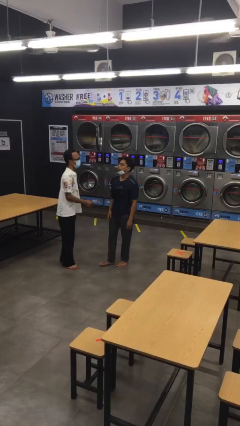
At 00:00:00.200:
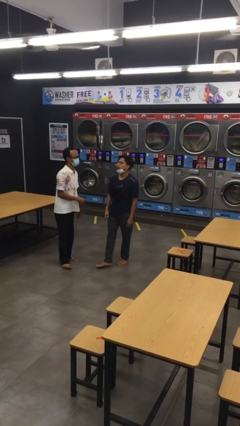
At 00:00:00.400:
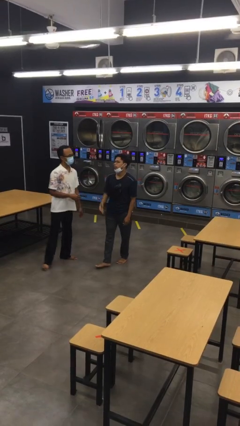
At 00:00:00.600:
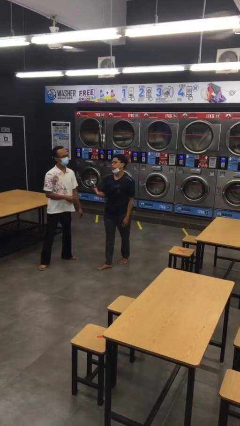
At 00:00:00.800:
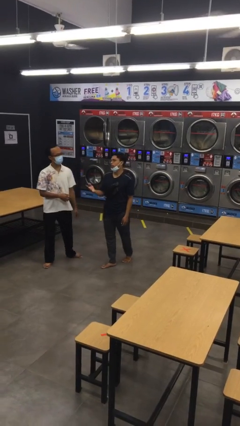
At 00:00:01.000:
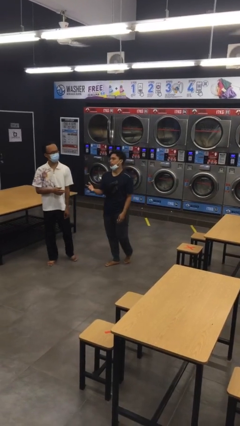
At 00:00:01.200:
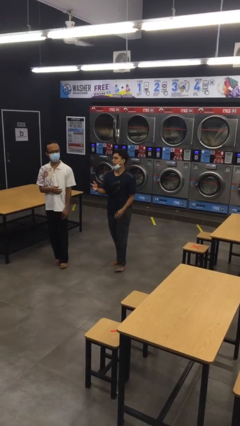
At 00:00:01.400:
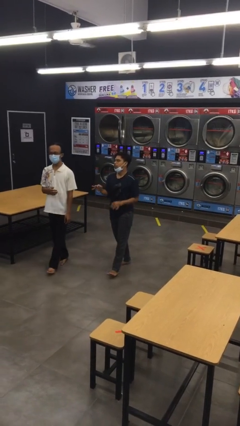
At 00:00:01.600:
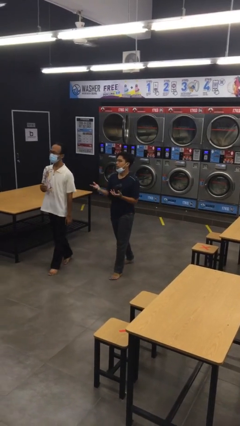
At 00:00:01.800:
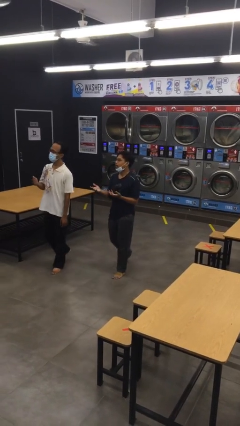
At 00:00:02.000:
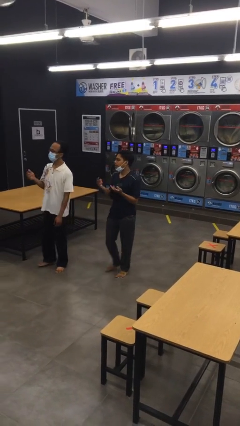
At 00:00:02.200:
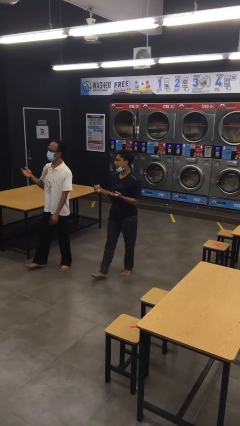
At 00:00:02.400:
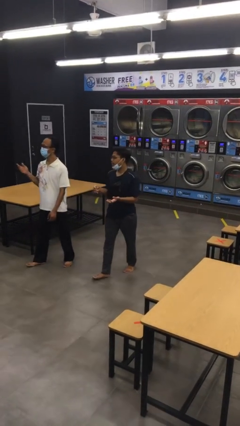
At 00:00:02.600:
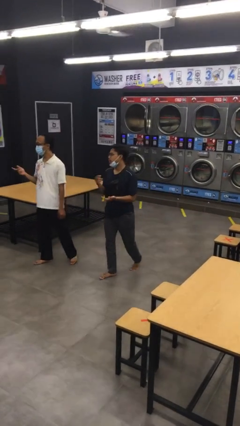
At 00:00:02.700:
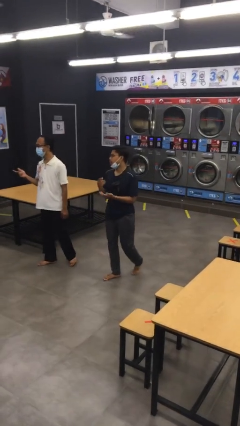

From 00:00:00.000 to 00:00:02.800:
person talks to person

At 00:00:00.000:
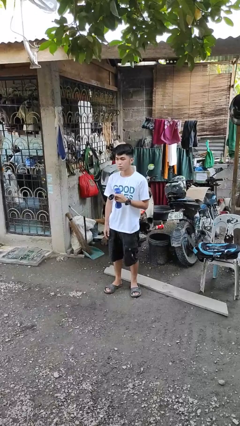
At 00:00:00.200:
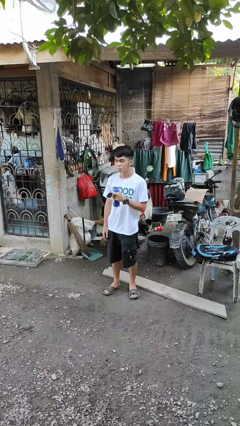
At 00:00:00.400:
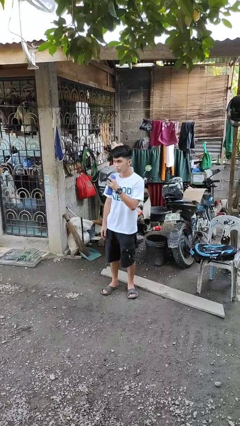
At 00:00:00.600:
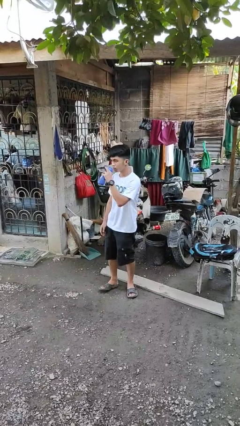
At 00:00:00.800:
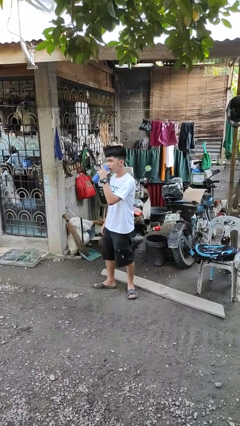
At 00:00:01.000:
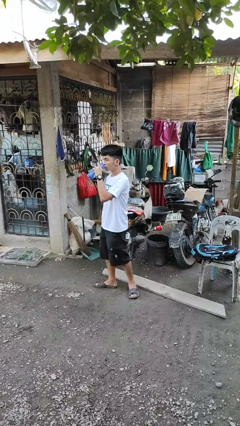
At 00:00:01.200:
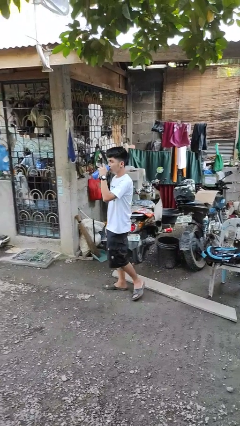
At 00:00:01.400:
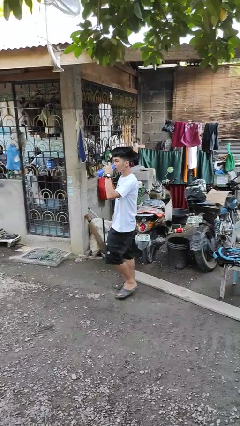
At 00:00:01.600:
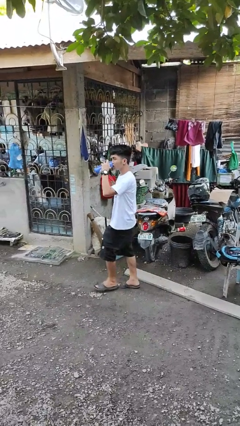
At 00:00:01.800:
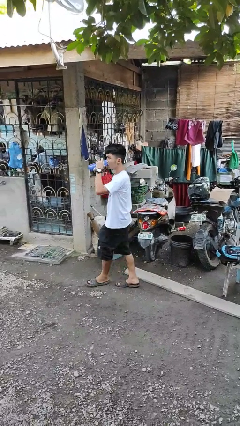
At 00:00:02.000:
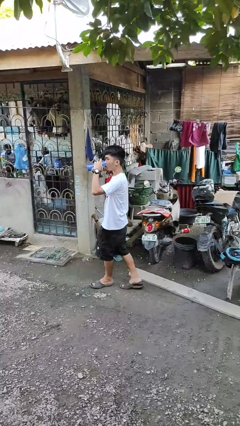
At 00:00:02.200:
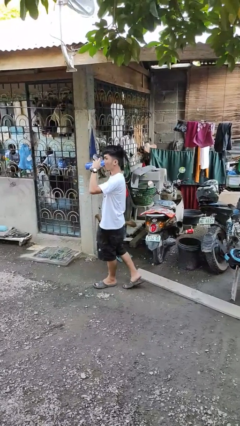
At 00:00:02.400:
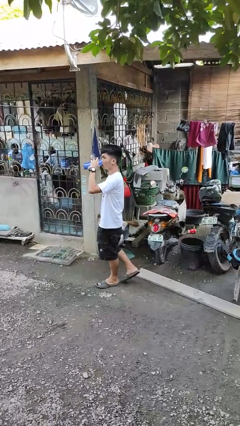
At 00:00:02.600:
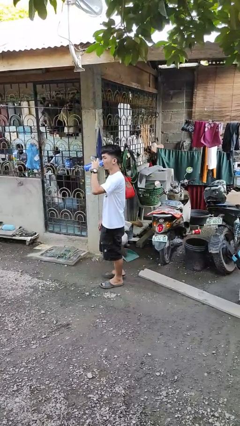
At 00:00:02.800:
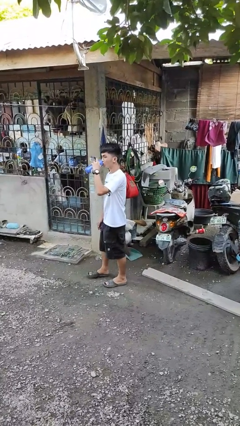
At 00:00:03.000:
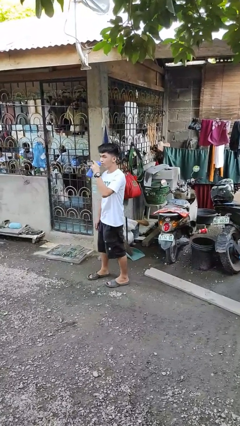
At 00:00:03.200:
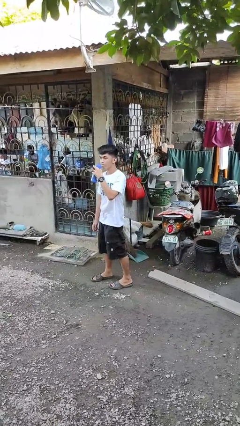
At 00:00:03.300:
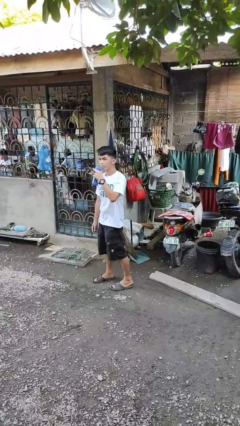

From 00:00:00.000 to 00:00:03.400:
person drinks from bottle

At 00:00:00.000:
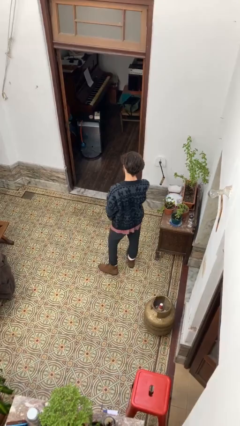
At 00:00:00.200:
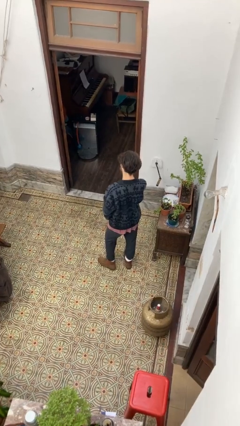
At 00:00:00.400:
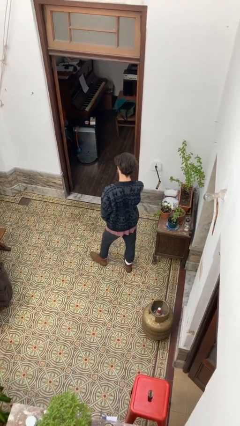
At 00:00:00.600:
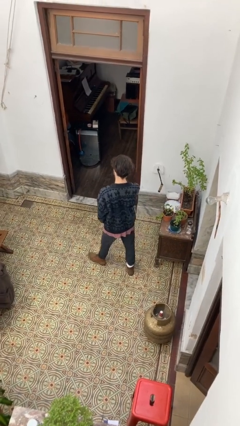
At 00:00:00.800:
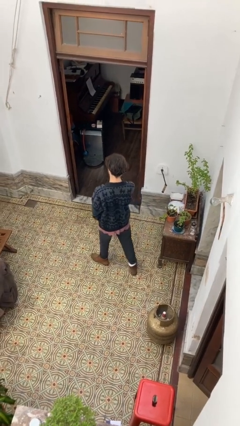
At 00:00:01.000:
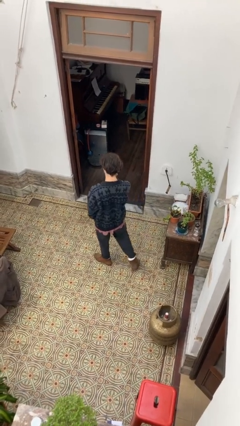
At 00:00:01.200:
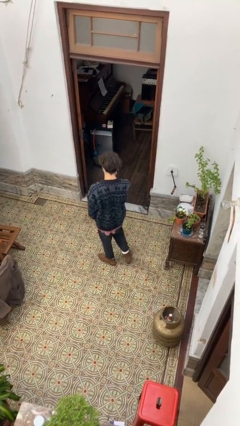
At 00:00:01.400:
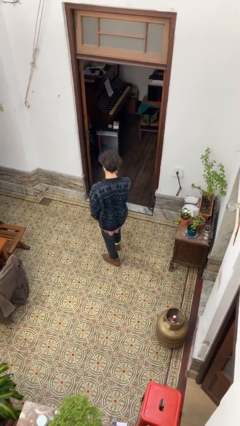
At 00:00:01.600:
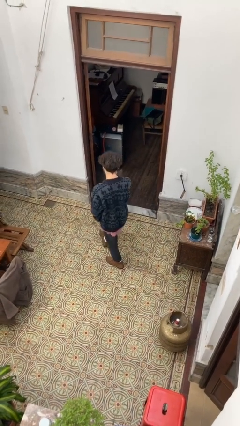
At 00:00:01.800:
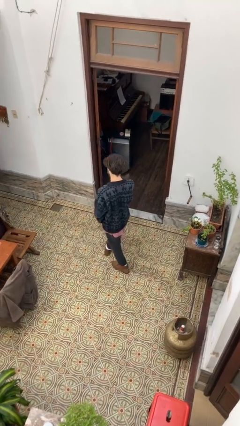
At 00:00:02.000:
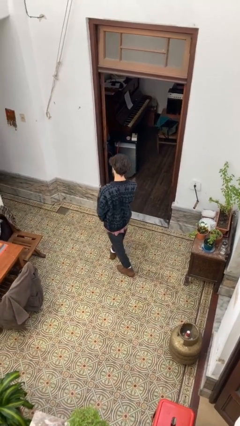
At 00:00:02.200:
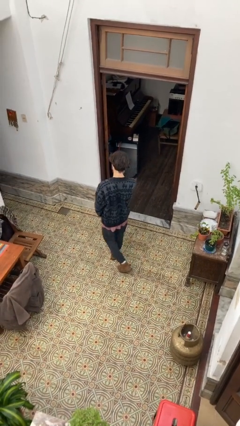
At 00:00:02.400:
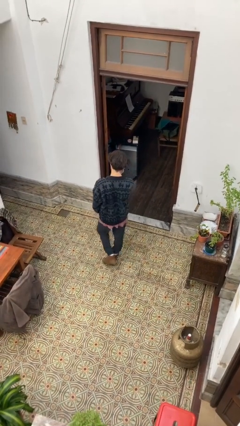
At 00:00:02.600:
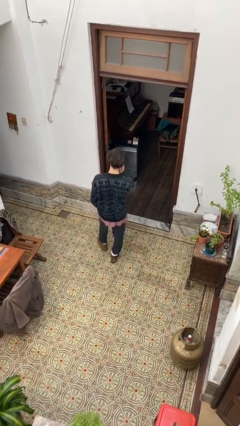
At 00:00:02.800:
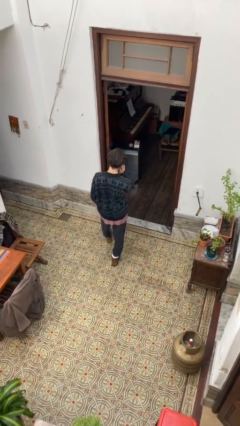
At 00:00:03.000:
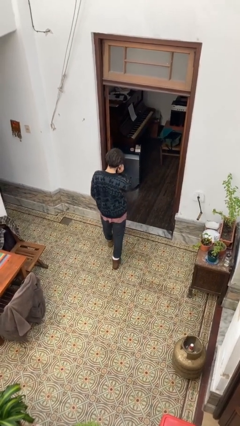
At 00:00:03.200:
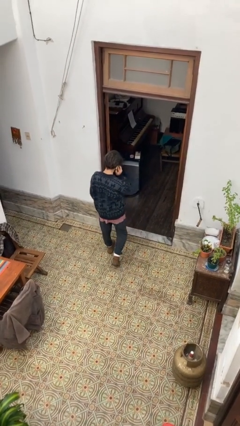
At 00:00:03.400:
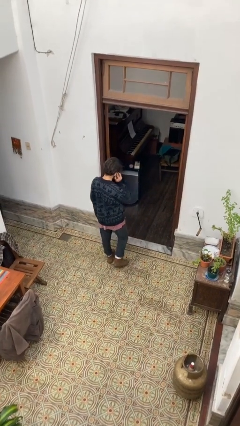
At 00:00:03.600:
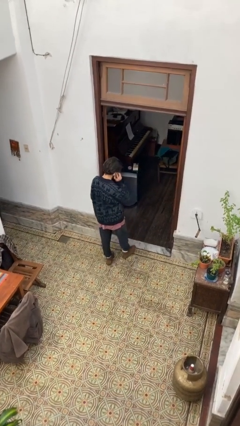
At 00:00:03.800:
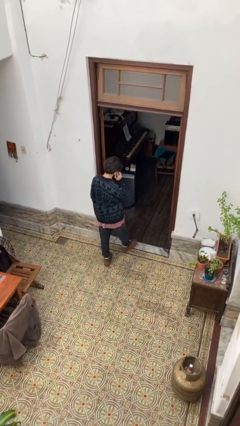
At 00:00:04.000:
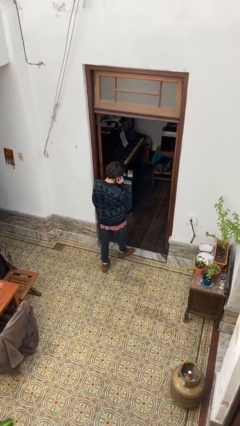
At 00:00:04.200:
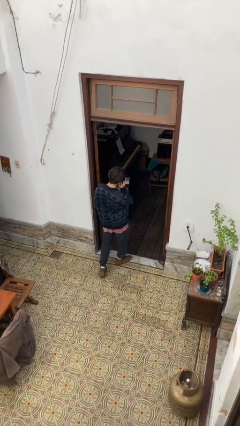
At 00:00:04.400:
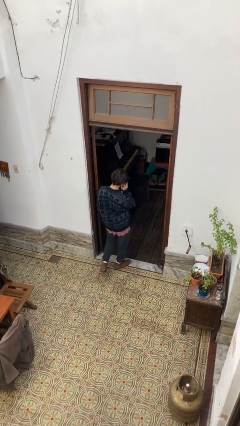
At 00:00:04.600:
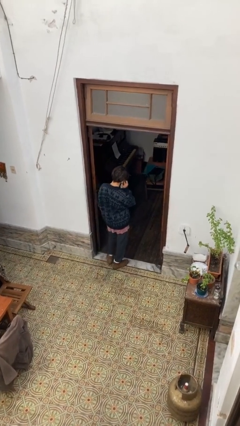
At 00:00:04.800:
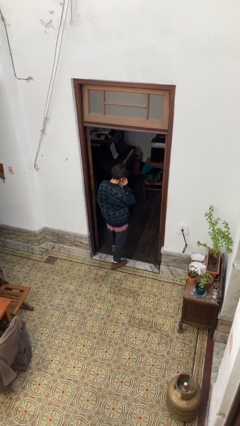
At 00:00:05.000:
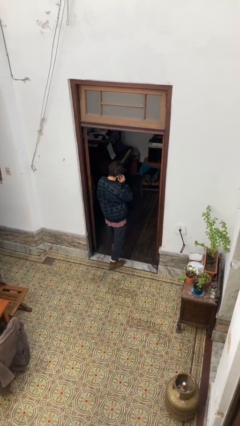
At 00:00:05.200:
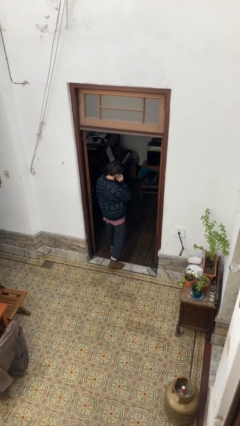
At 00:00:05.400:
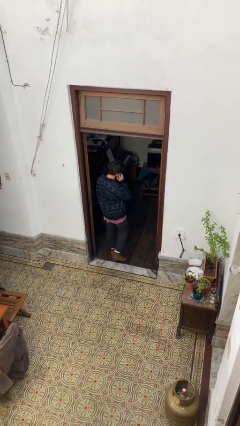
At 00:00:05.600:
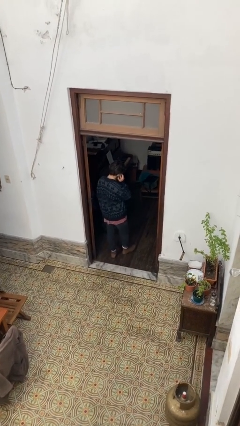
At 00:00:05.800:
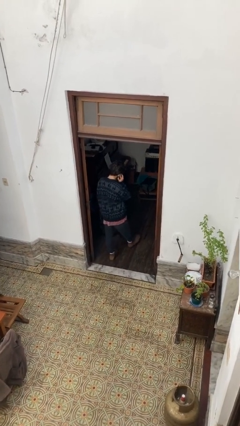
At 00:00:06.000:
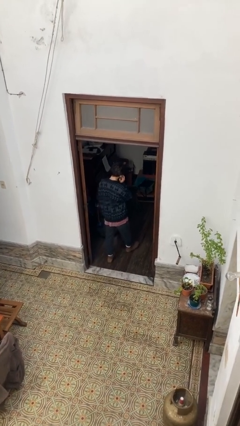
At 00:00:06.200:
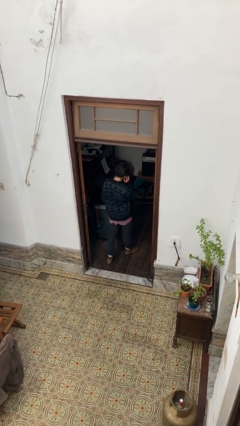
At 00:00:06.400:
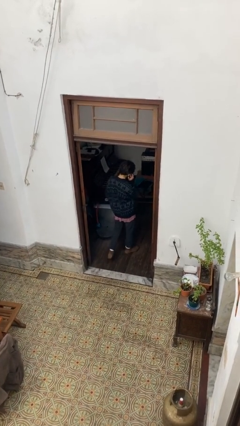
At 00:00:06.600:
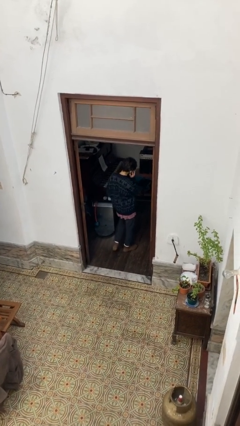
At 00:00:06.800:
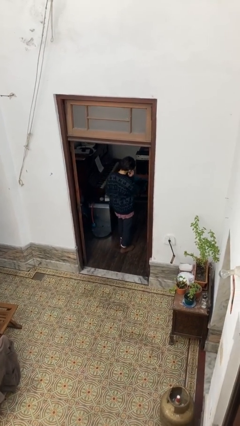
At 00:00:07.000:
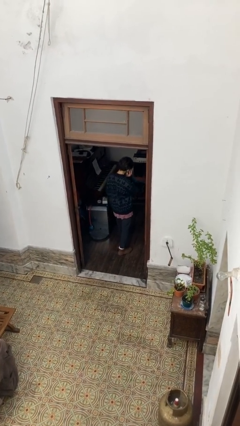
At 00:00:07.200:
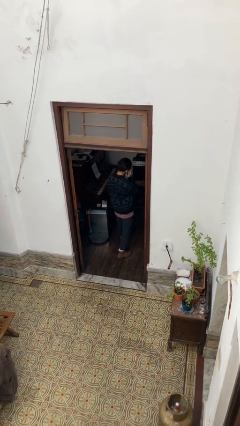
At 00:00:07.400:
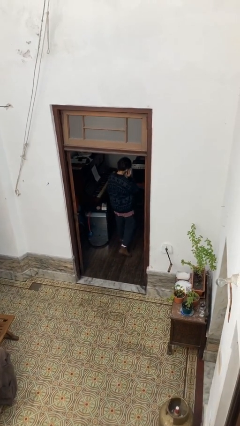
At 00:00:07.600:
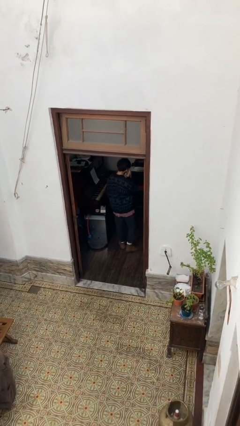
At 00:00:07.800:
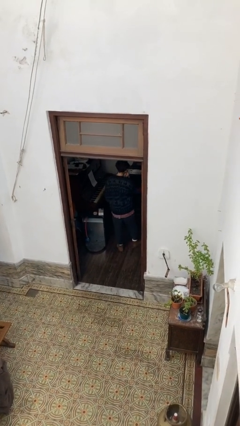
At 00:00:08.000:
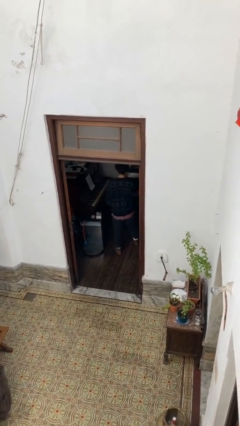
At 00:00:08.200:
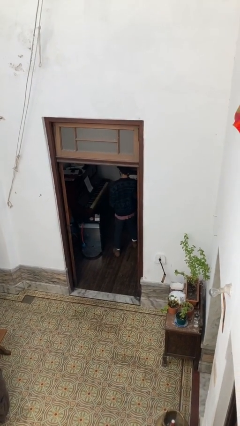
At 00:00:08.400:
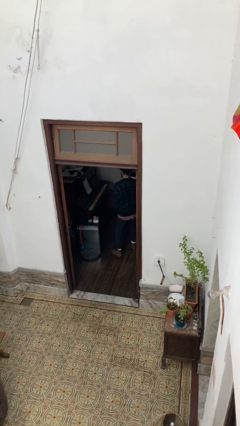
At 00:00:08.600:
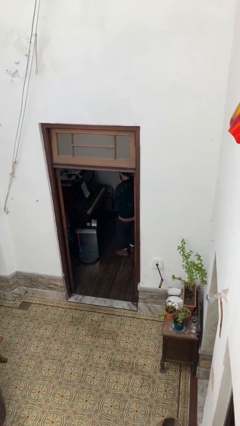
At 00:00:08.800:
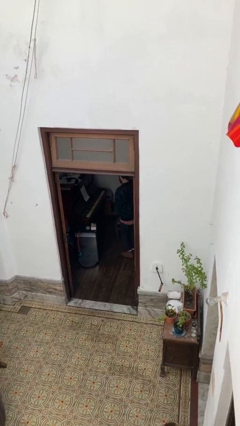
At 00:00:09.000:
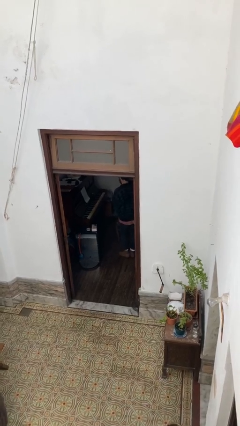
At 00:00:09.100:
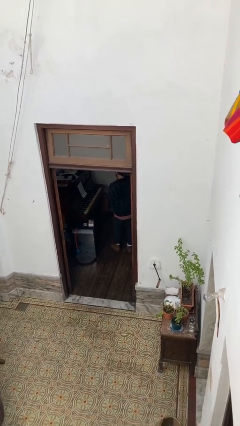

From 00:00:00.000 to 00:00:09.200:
person exits scene through structure

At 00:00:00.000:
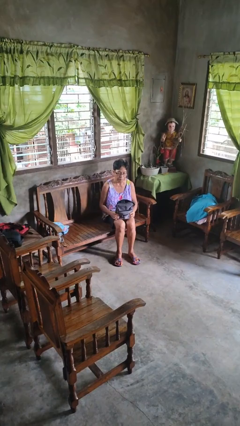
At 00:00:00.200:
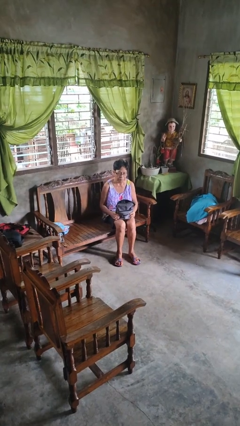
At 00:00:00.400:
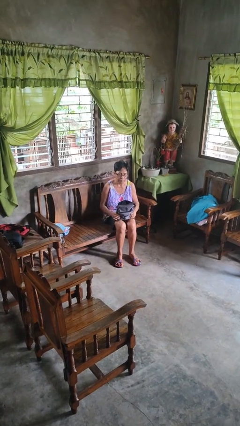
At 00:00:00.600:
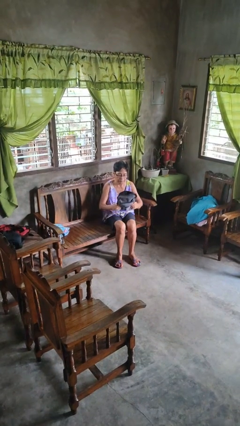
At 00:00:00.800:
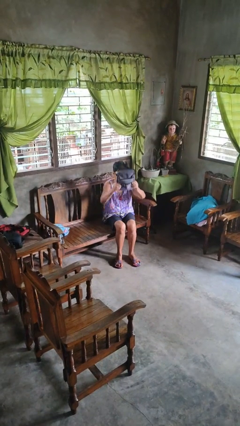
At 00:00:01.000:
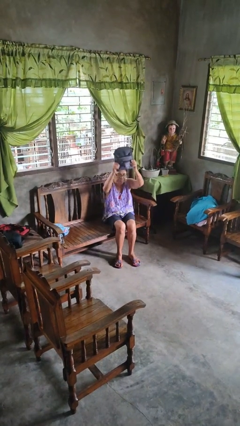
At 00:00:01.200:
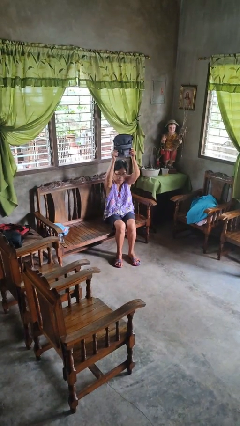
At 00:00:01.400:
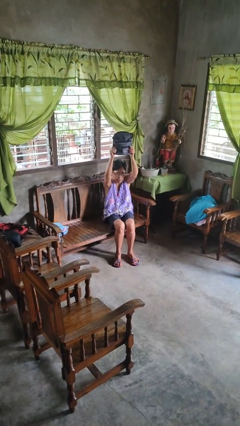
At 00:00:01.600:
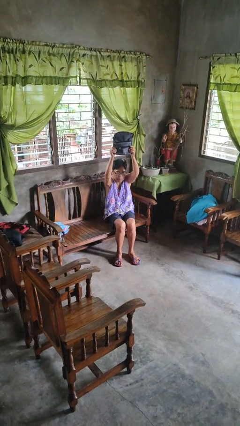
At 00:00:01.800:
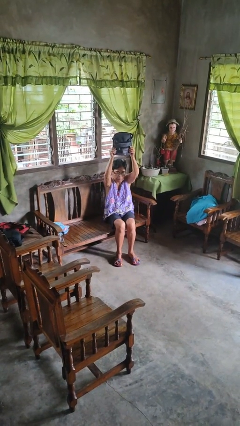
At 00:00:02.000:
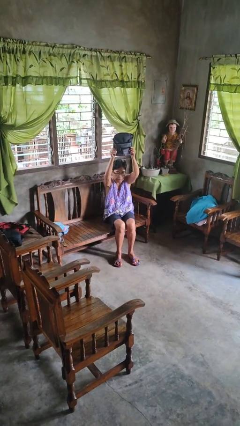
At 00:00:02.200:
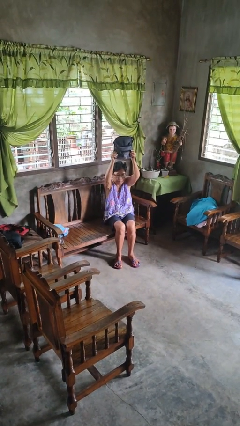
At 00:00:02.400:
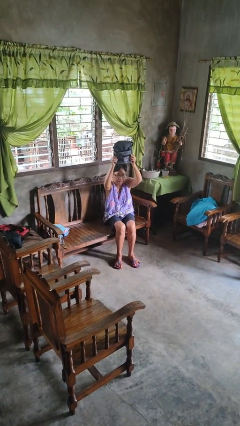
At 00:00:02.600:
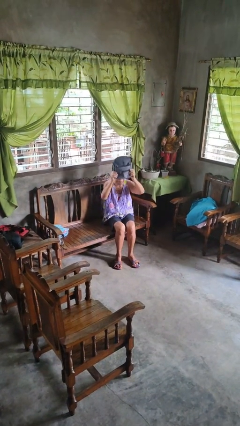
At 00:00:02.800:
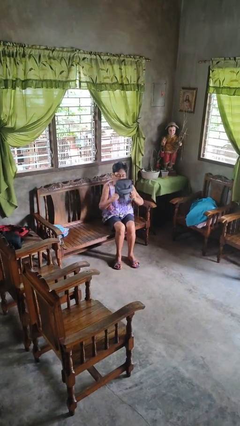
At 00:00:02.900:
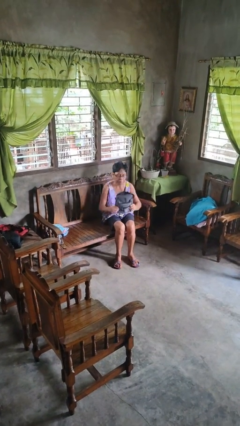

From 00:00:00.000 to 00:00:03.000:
person holds object above head
